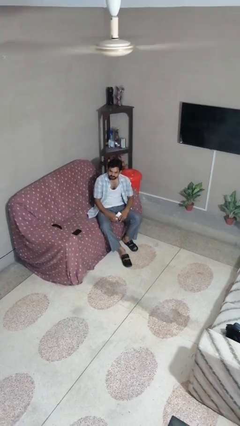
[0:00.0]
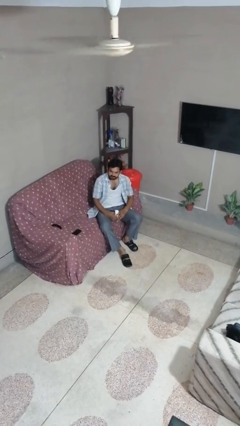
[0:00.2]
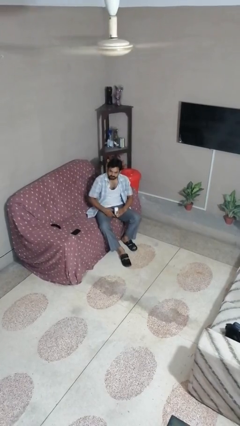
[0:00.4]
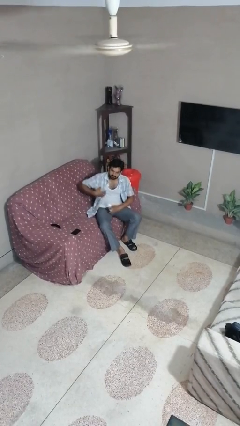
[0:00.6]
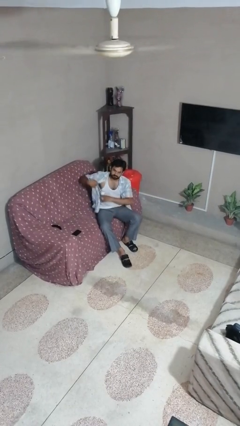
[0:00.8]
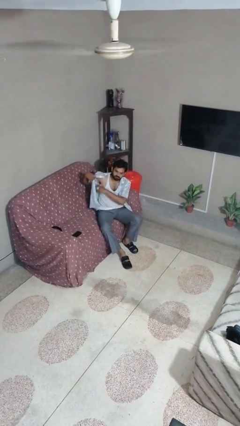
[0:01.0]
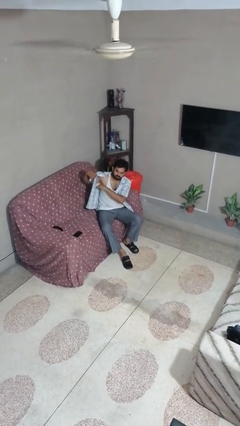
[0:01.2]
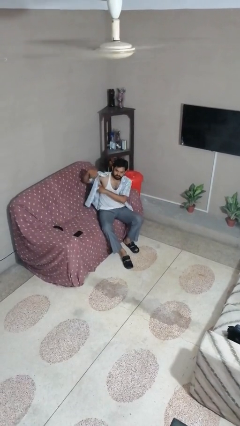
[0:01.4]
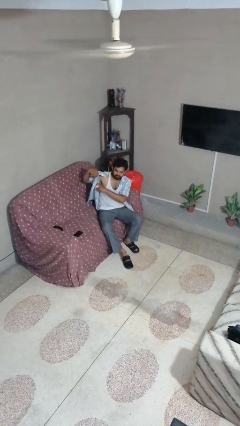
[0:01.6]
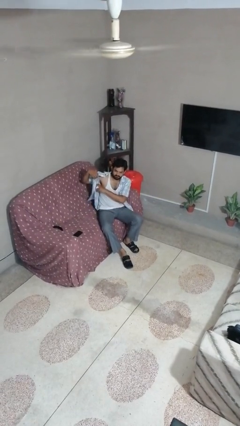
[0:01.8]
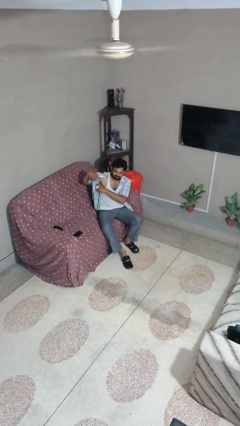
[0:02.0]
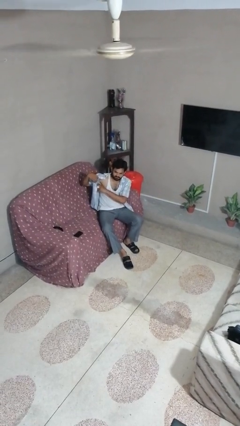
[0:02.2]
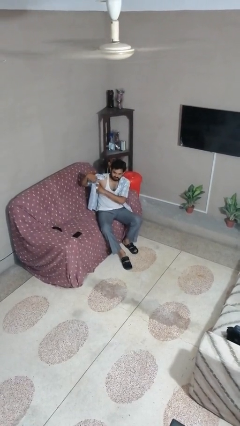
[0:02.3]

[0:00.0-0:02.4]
person applies deodorant

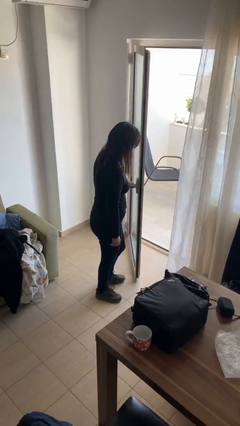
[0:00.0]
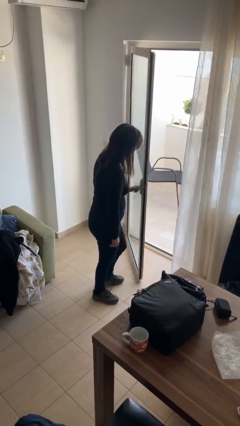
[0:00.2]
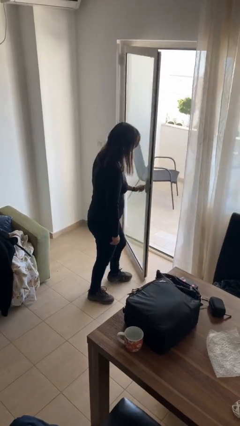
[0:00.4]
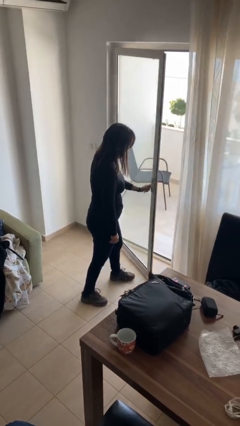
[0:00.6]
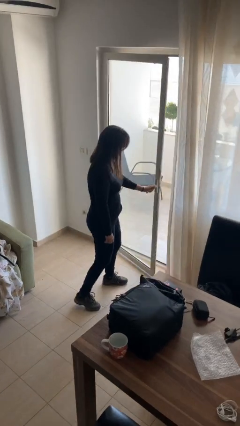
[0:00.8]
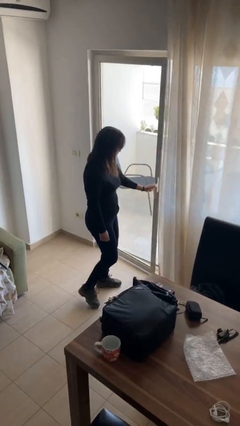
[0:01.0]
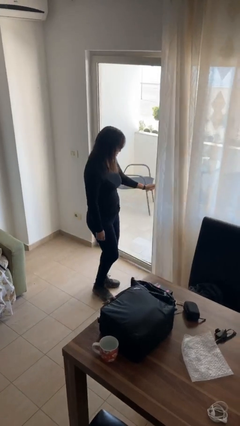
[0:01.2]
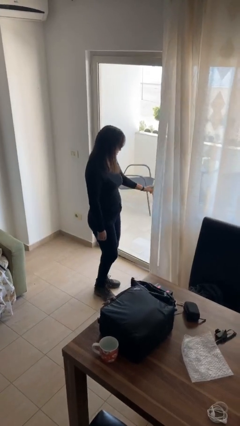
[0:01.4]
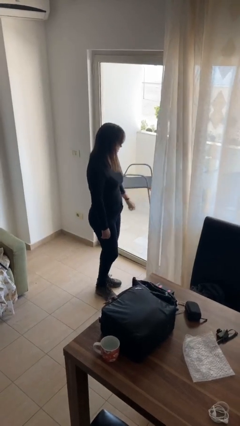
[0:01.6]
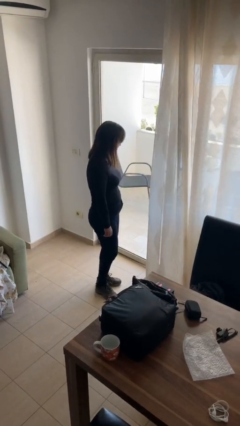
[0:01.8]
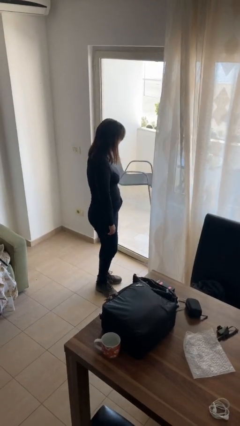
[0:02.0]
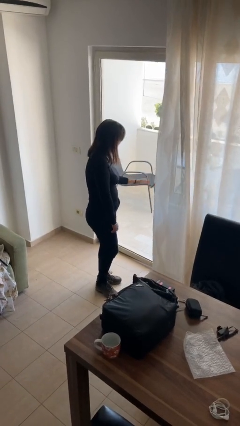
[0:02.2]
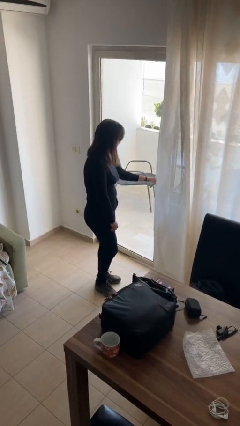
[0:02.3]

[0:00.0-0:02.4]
person closes facility door

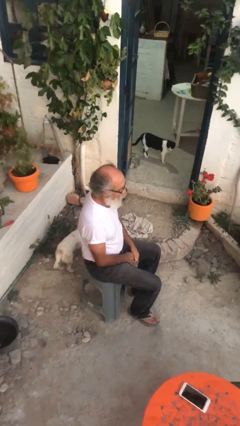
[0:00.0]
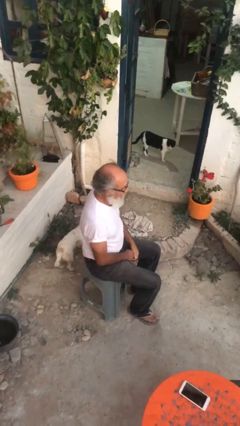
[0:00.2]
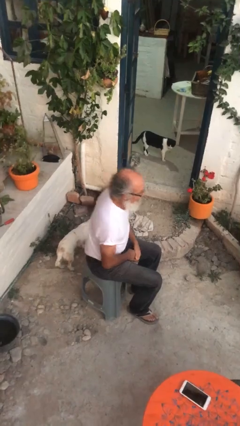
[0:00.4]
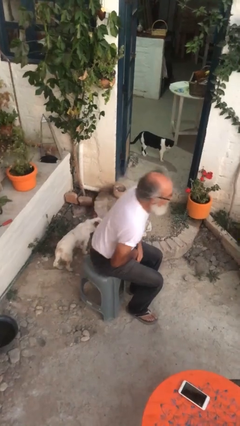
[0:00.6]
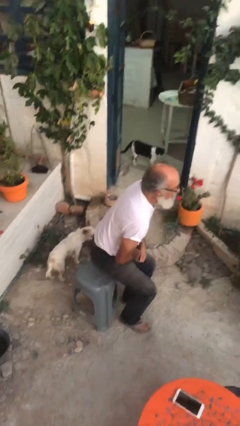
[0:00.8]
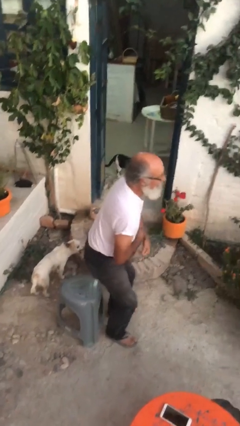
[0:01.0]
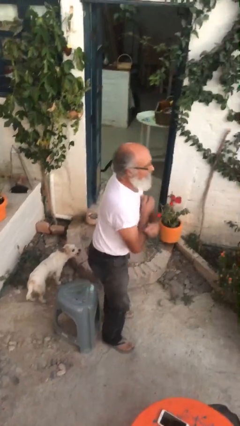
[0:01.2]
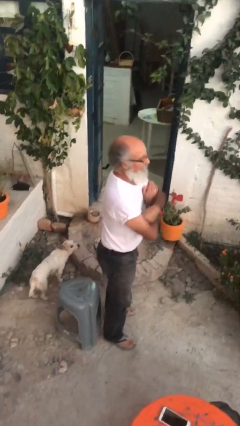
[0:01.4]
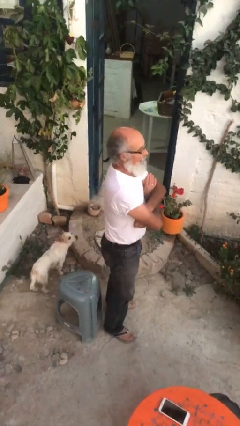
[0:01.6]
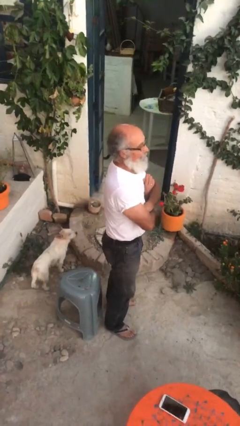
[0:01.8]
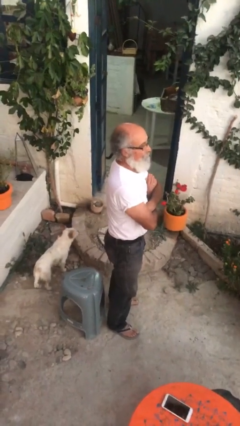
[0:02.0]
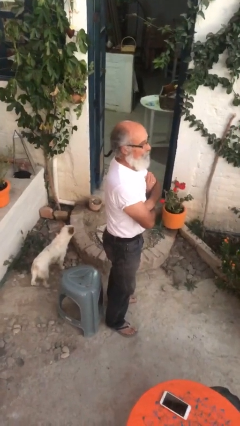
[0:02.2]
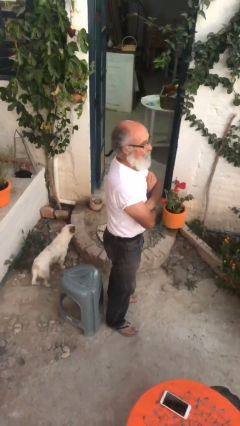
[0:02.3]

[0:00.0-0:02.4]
person stands up

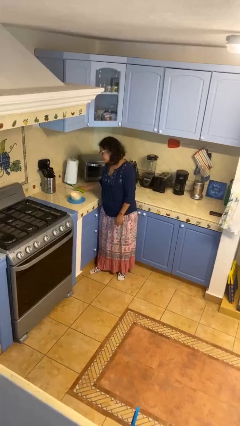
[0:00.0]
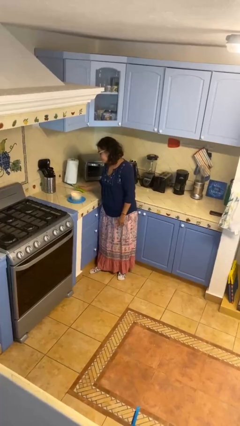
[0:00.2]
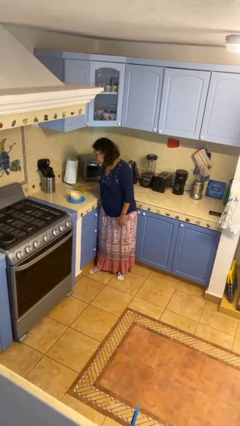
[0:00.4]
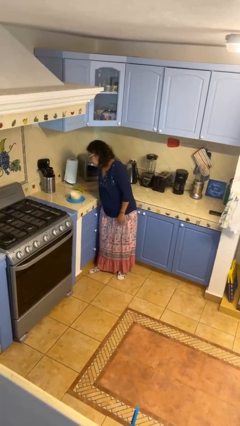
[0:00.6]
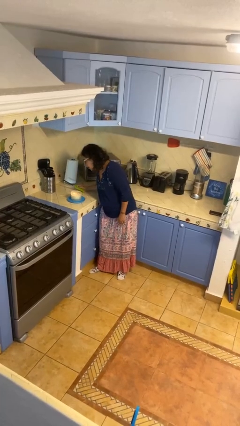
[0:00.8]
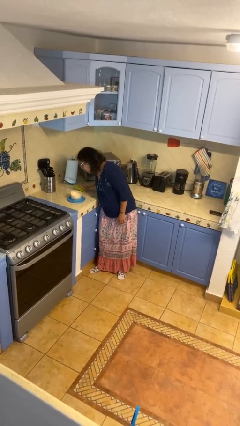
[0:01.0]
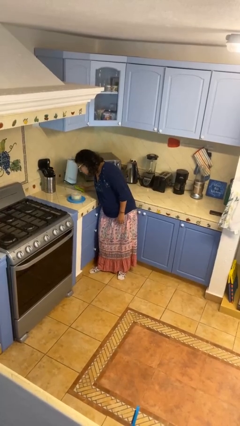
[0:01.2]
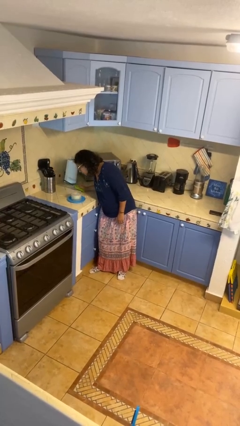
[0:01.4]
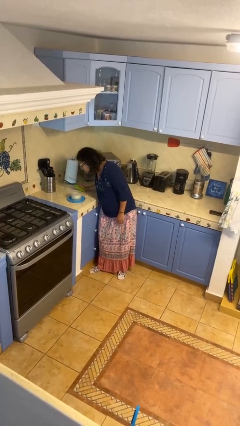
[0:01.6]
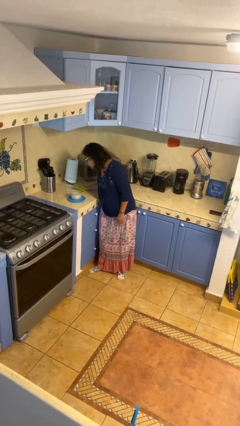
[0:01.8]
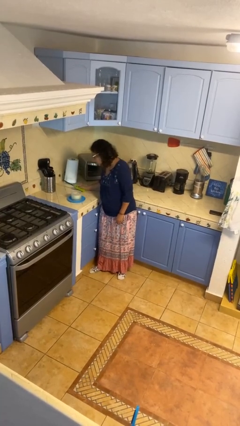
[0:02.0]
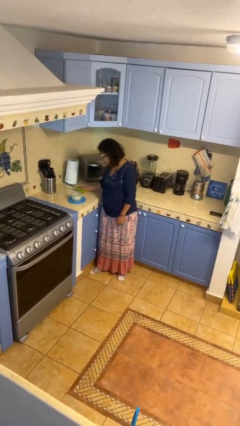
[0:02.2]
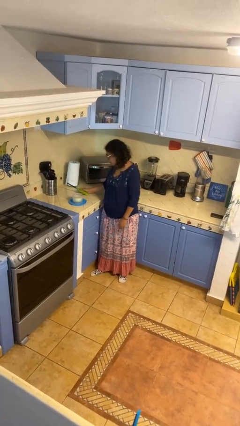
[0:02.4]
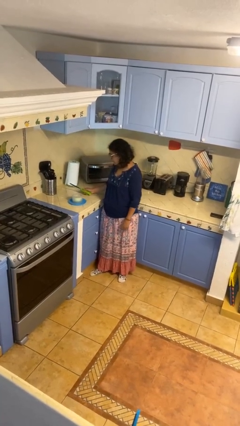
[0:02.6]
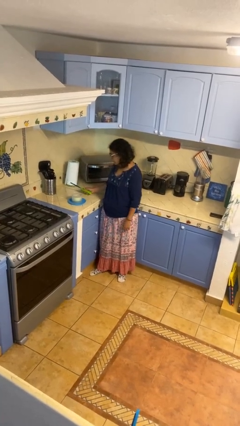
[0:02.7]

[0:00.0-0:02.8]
person extinguishes candle

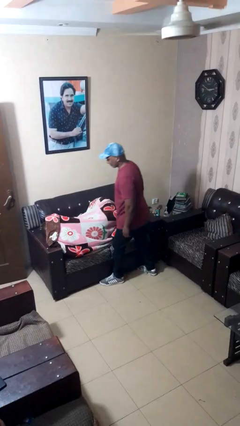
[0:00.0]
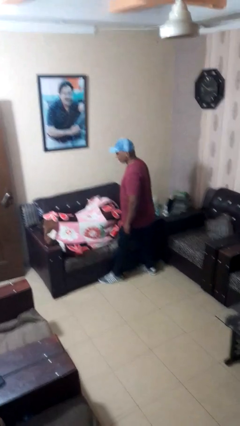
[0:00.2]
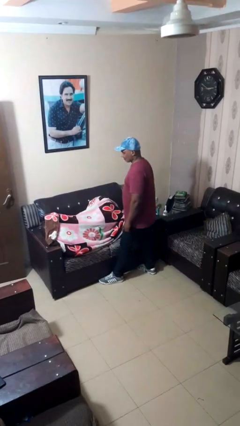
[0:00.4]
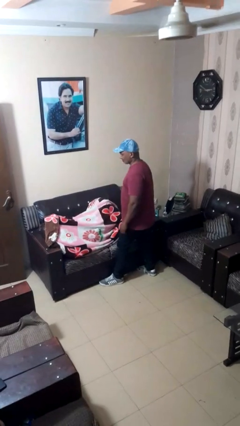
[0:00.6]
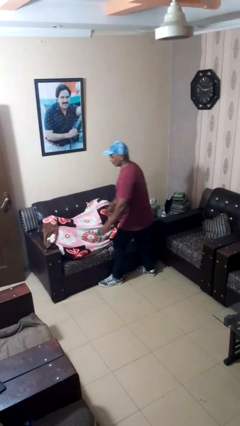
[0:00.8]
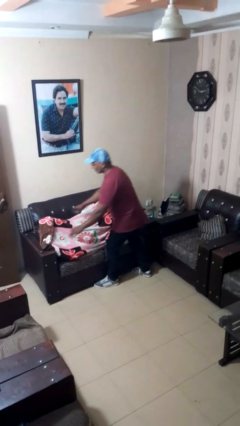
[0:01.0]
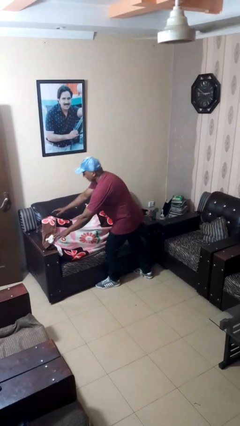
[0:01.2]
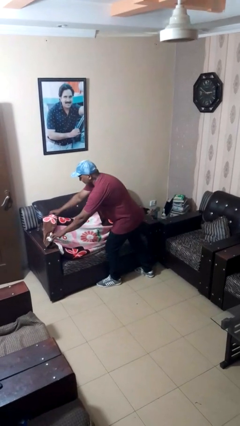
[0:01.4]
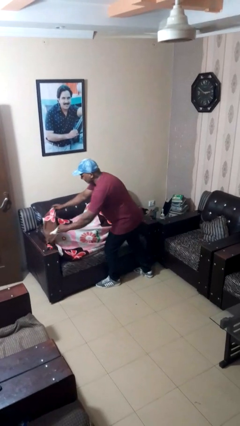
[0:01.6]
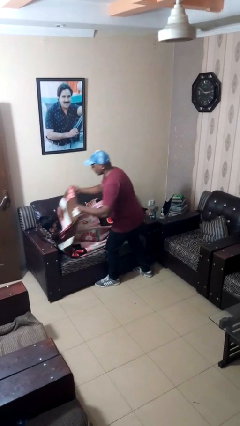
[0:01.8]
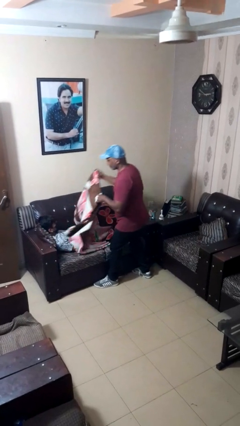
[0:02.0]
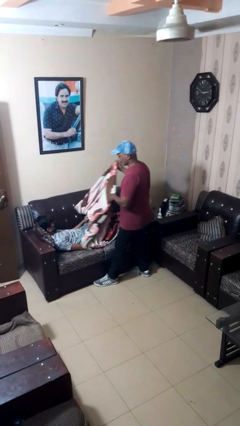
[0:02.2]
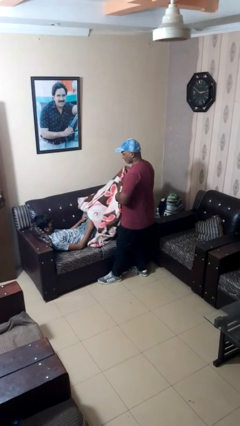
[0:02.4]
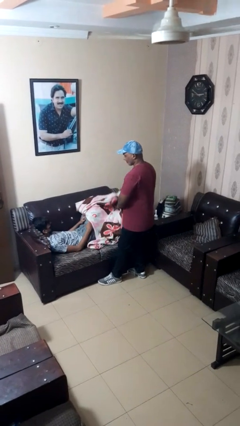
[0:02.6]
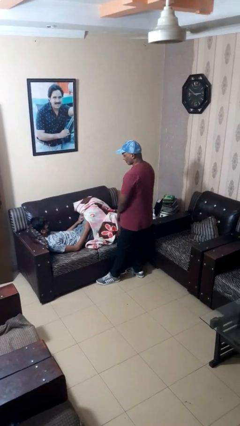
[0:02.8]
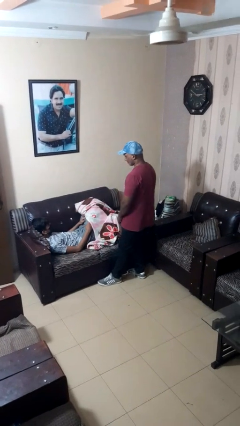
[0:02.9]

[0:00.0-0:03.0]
person uncovers friend with blanket

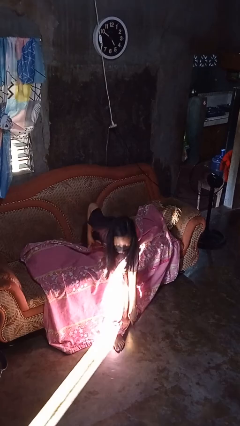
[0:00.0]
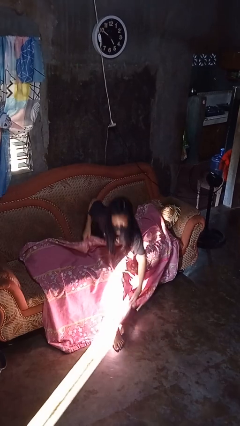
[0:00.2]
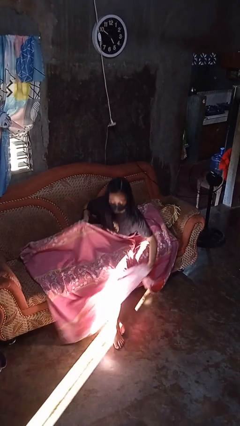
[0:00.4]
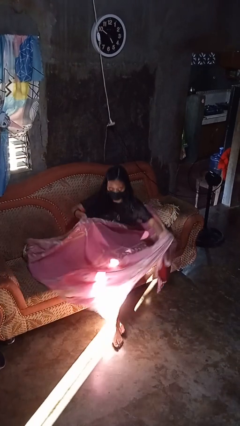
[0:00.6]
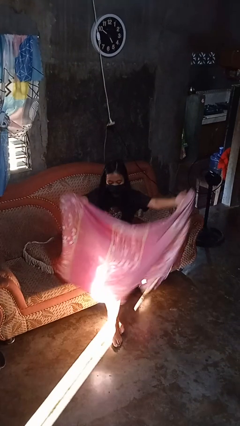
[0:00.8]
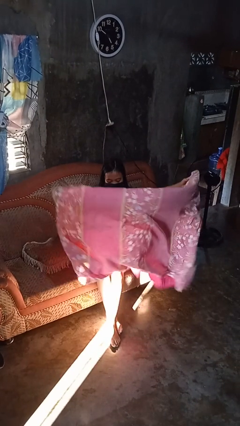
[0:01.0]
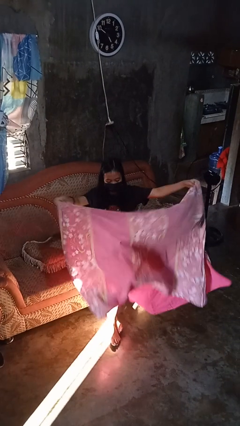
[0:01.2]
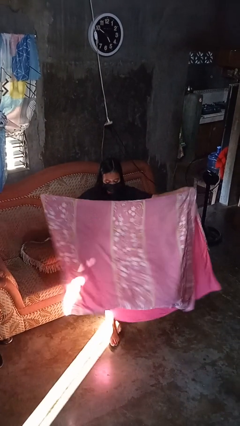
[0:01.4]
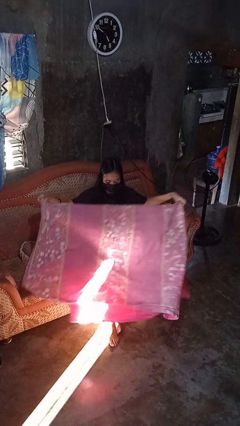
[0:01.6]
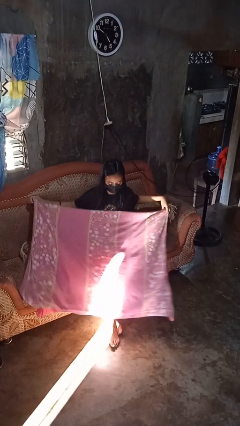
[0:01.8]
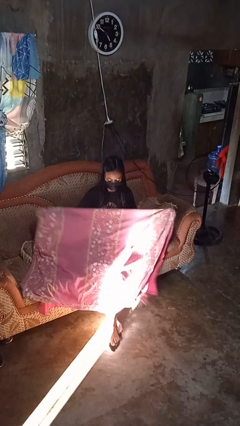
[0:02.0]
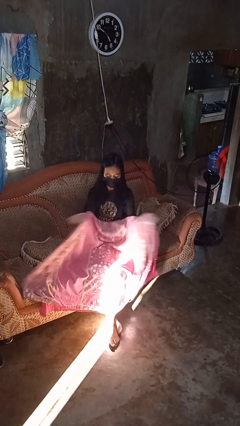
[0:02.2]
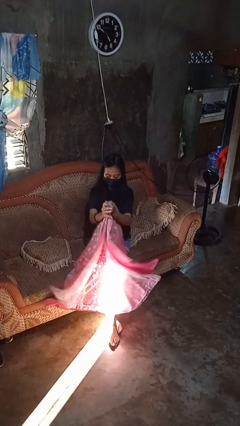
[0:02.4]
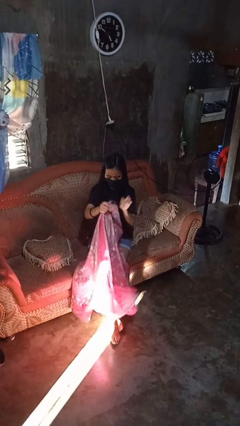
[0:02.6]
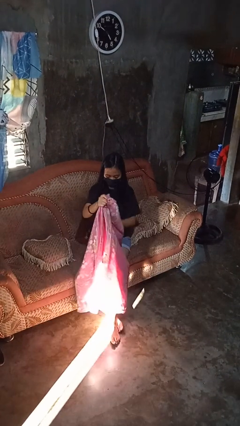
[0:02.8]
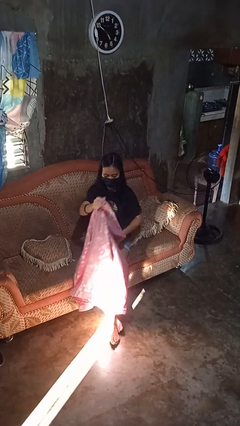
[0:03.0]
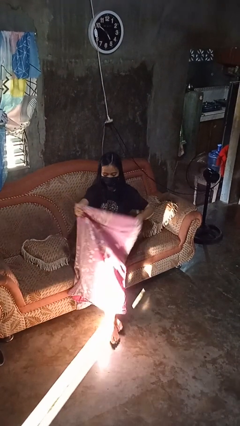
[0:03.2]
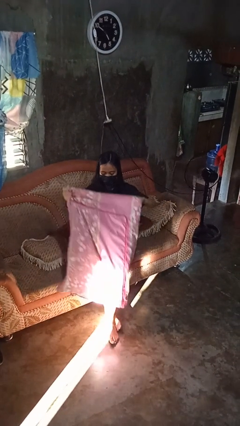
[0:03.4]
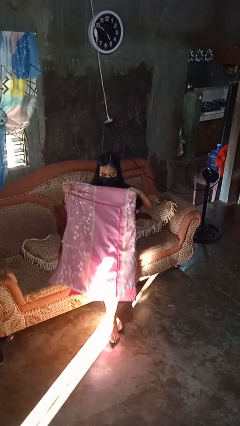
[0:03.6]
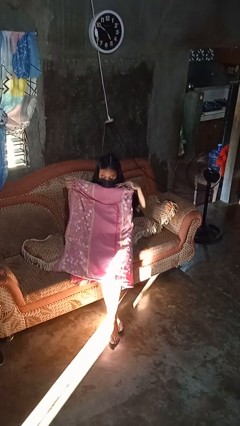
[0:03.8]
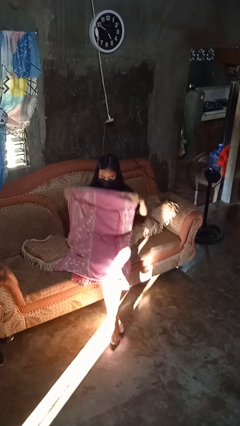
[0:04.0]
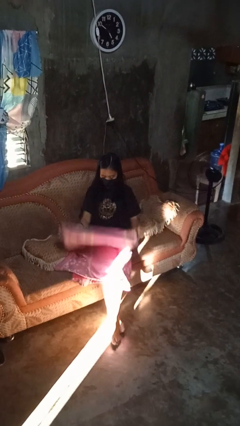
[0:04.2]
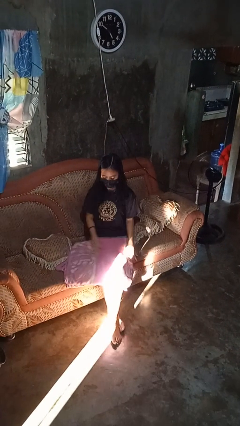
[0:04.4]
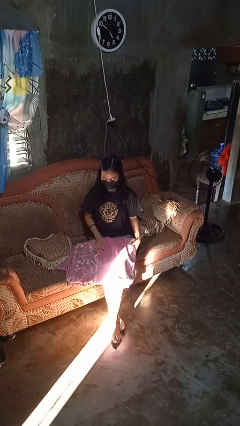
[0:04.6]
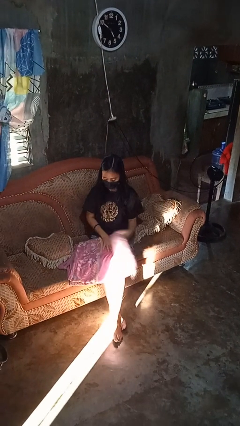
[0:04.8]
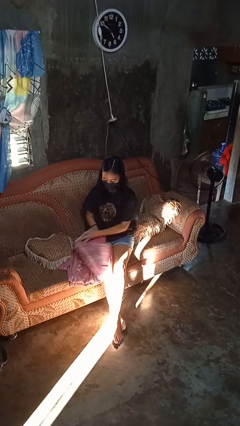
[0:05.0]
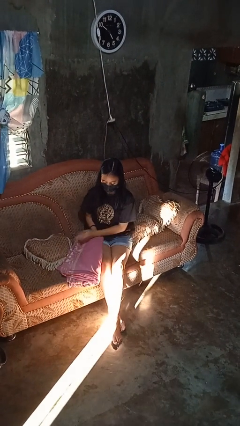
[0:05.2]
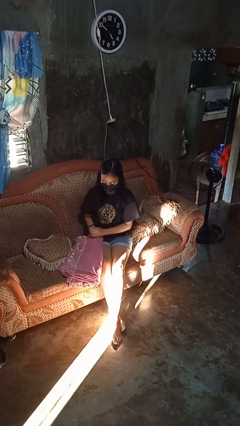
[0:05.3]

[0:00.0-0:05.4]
person folds blanket
